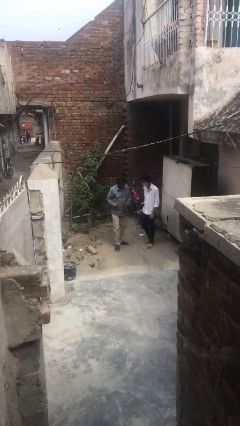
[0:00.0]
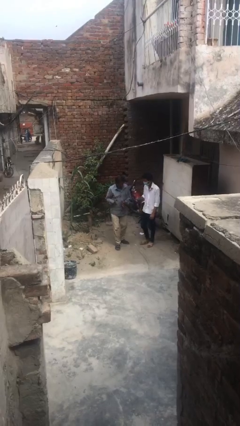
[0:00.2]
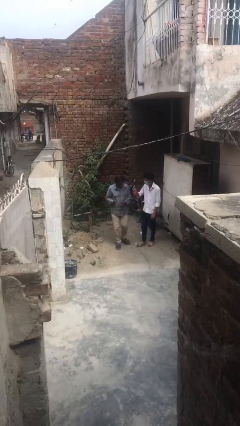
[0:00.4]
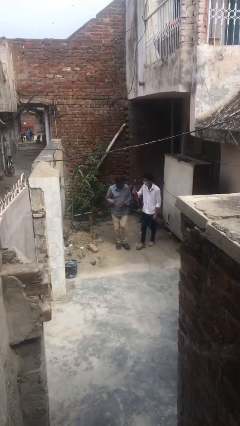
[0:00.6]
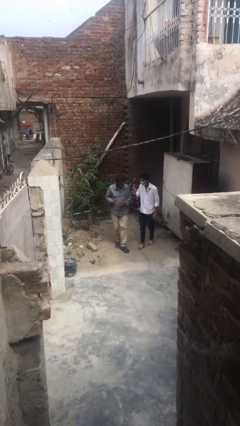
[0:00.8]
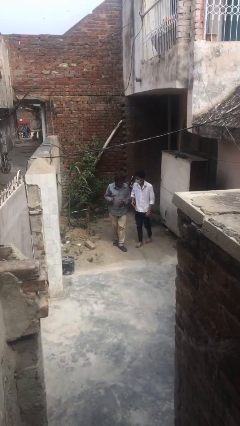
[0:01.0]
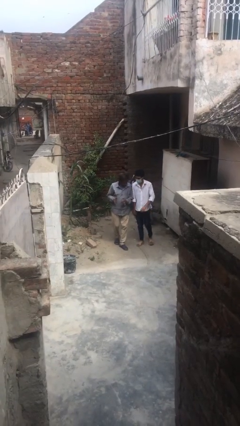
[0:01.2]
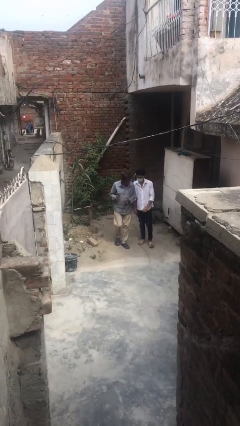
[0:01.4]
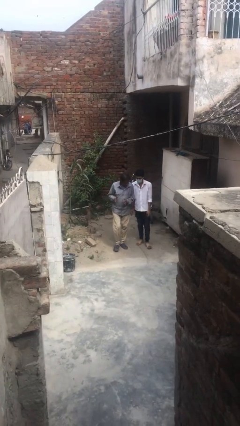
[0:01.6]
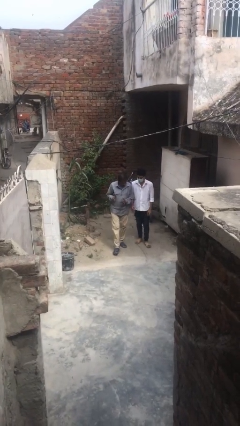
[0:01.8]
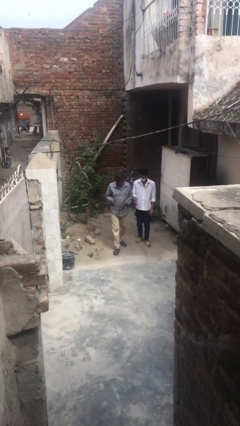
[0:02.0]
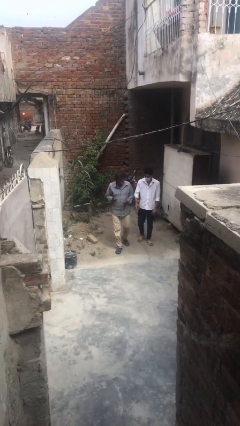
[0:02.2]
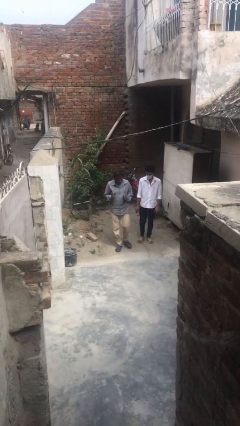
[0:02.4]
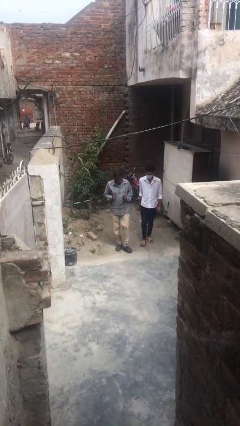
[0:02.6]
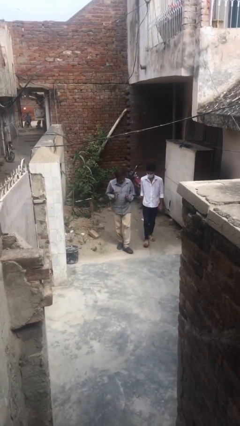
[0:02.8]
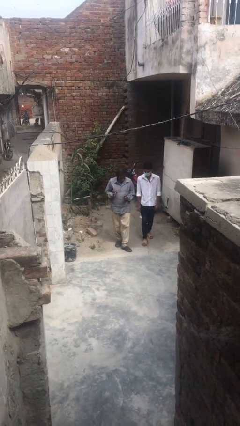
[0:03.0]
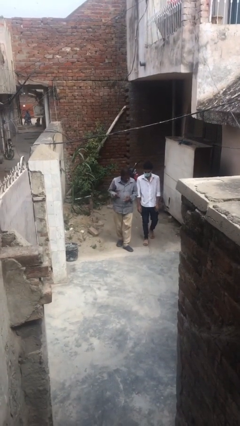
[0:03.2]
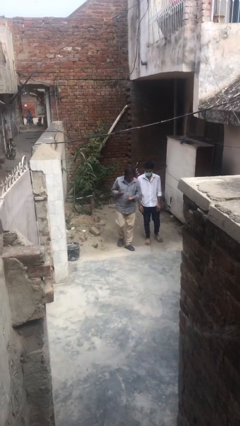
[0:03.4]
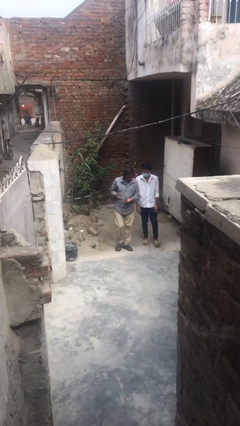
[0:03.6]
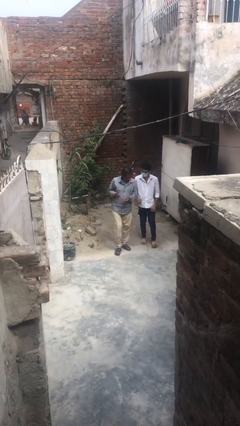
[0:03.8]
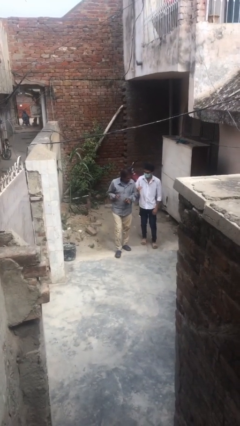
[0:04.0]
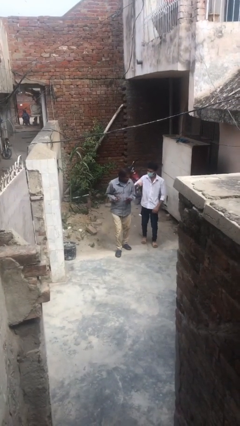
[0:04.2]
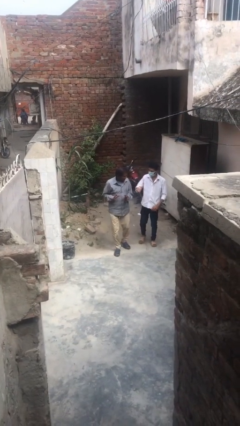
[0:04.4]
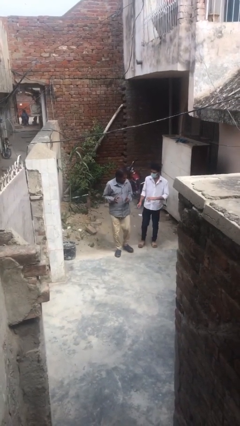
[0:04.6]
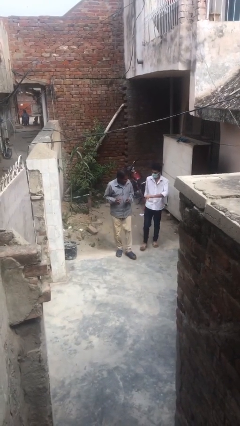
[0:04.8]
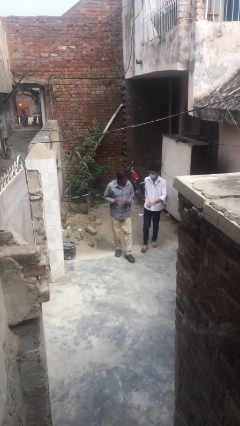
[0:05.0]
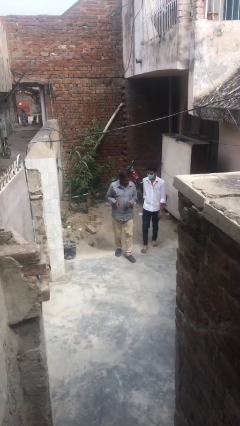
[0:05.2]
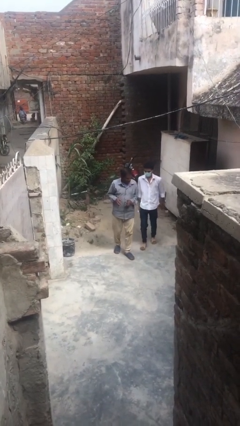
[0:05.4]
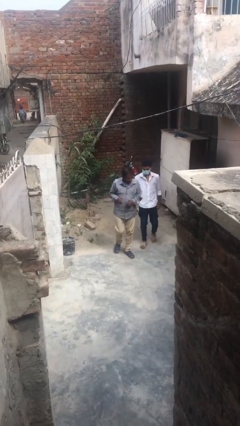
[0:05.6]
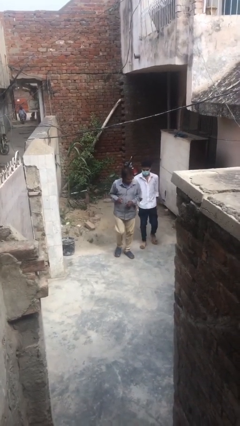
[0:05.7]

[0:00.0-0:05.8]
person talks to person

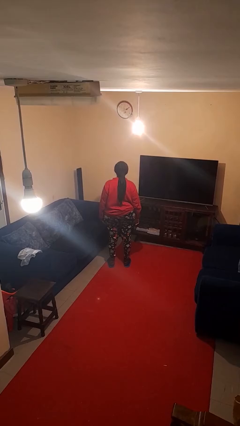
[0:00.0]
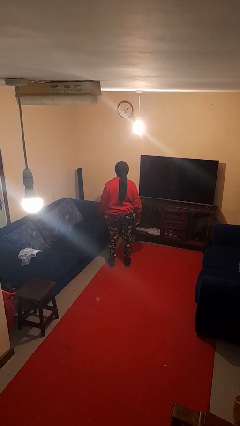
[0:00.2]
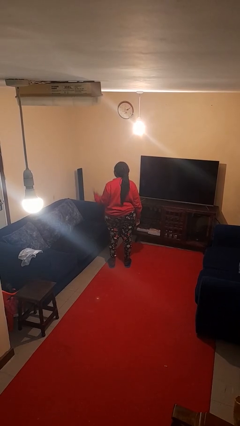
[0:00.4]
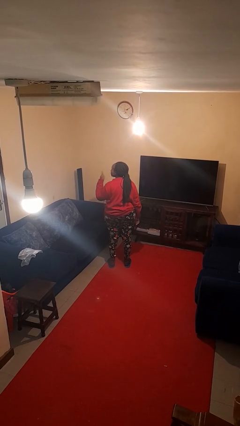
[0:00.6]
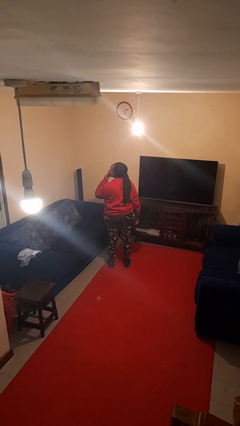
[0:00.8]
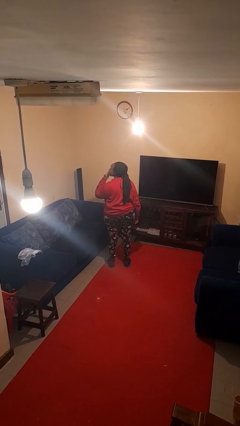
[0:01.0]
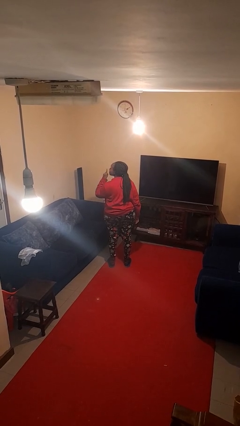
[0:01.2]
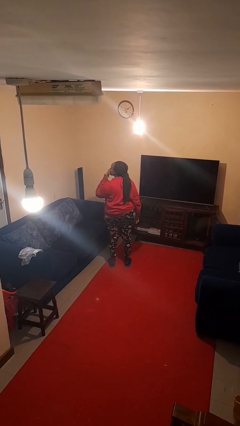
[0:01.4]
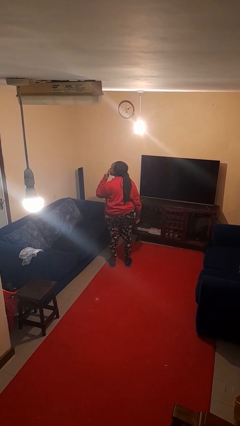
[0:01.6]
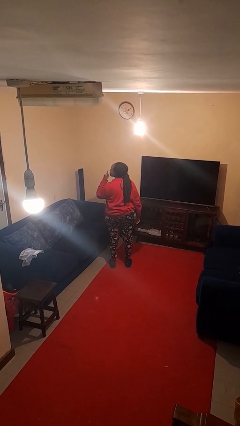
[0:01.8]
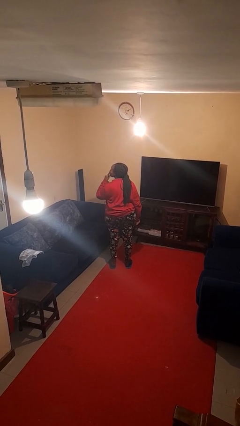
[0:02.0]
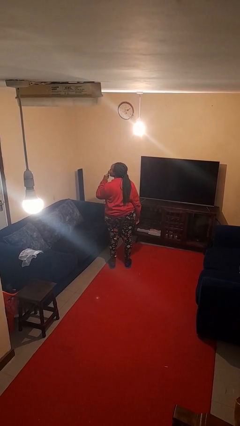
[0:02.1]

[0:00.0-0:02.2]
person gestures be quiet

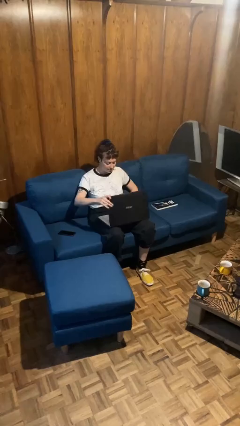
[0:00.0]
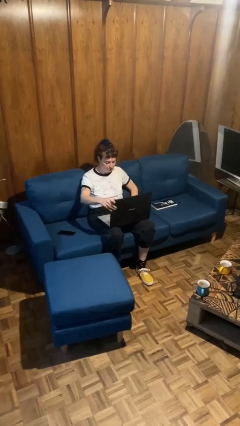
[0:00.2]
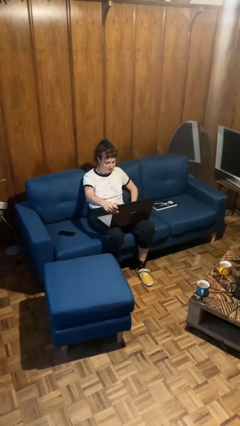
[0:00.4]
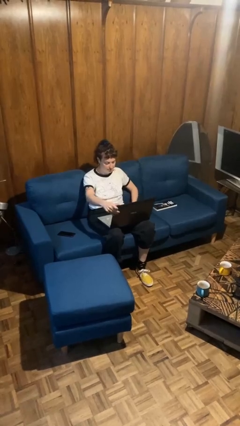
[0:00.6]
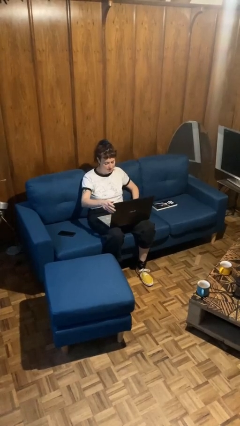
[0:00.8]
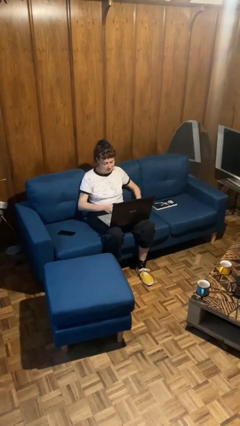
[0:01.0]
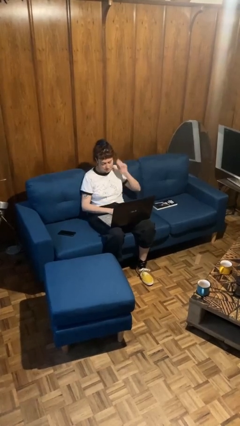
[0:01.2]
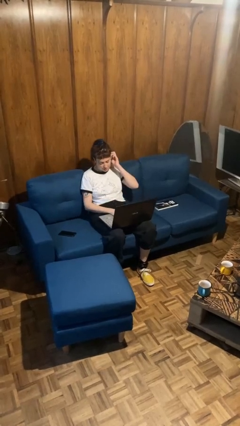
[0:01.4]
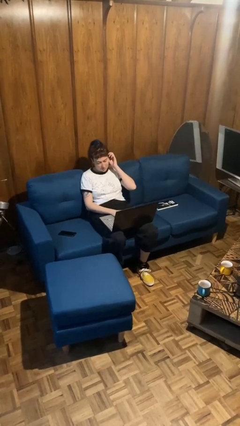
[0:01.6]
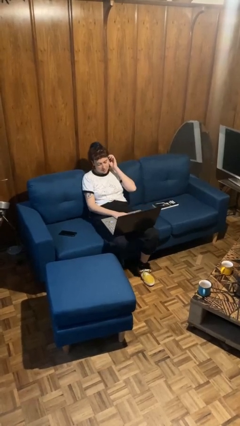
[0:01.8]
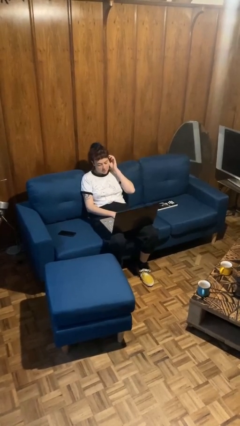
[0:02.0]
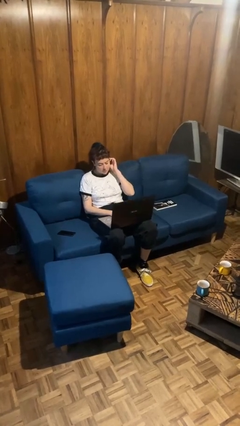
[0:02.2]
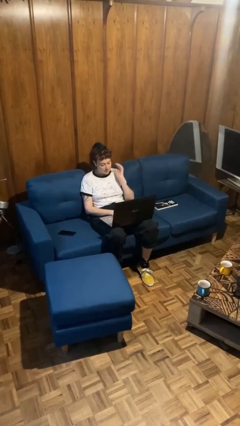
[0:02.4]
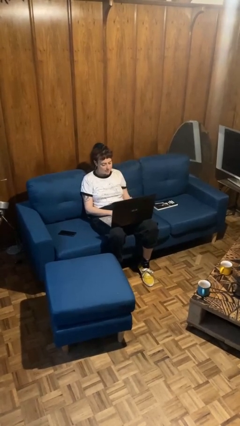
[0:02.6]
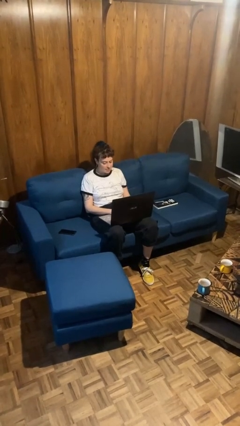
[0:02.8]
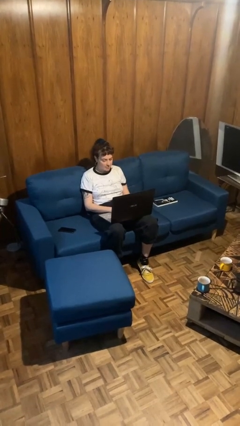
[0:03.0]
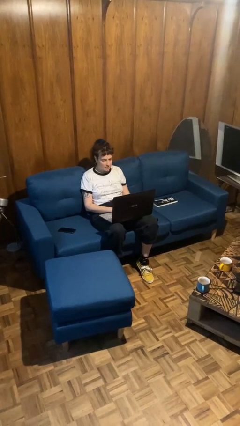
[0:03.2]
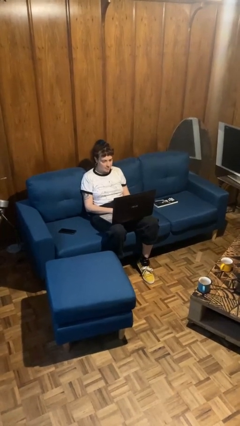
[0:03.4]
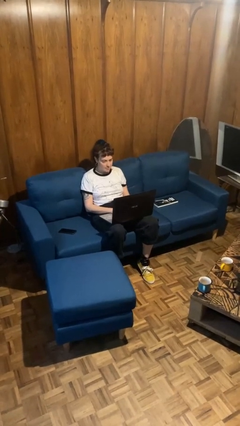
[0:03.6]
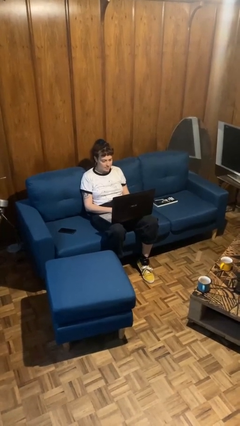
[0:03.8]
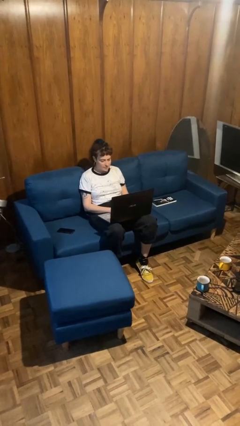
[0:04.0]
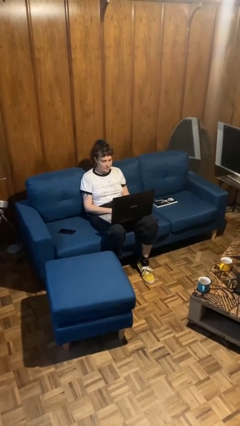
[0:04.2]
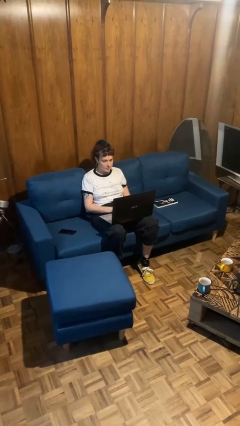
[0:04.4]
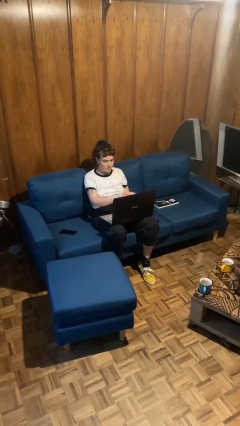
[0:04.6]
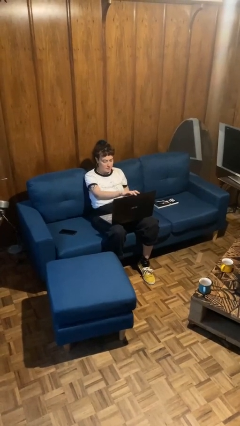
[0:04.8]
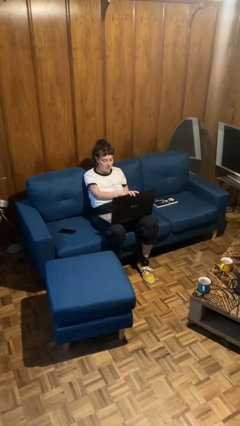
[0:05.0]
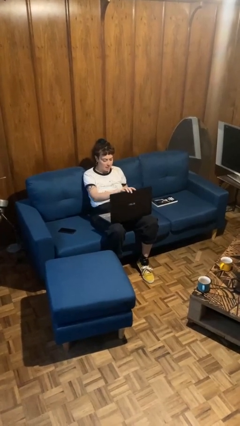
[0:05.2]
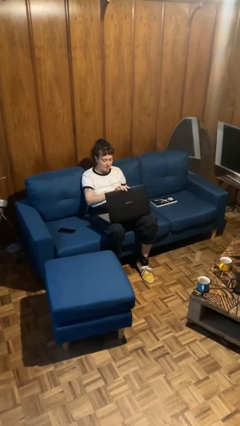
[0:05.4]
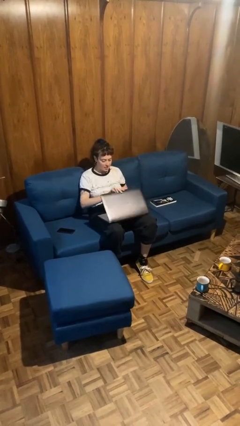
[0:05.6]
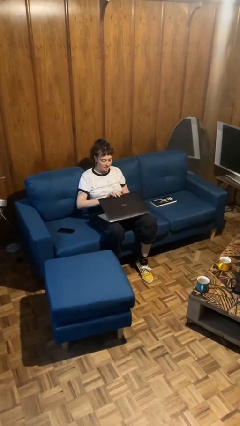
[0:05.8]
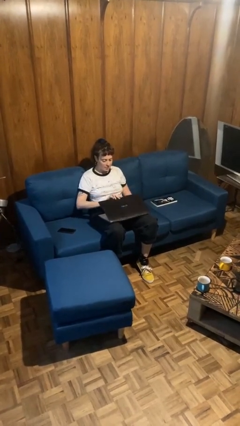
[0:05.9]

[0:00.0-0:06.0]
person interacts with laptop

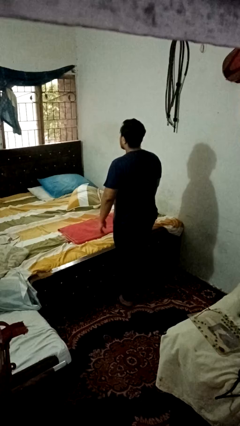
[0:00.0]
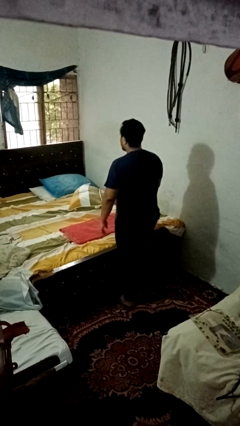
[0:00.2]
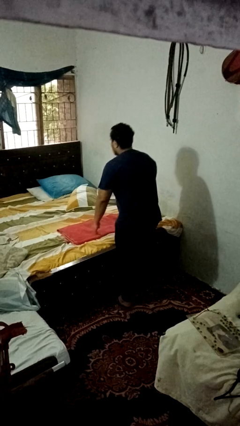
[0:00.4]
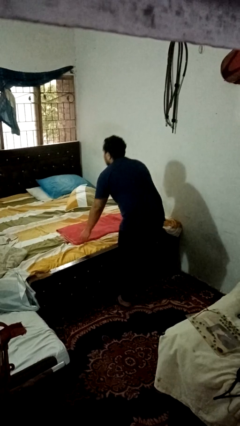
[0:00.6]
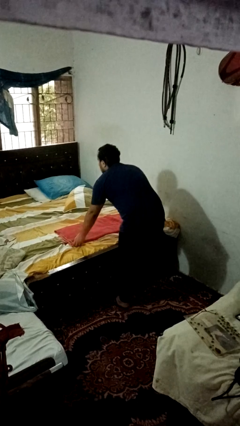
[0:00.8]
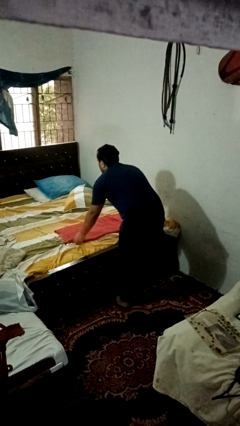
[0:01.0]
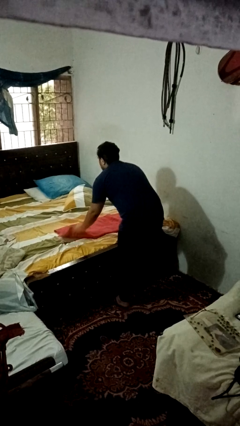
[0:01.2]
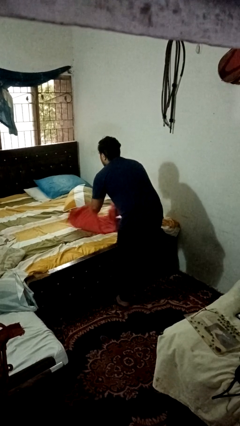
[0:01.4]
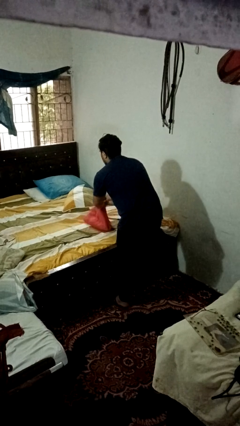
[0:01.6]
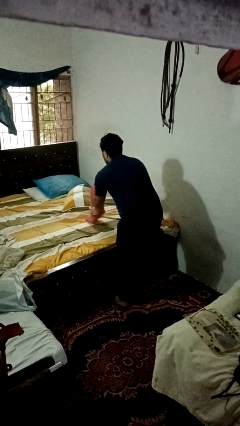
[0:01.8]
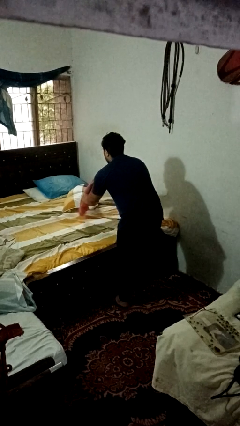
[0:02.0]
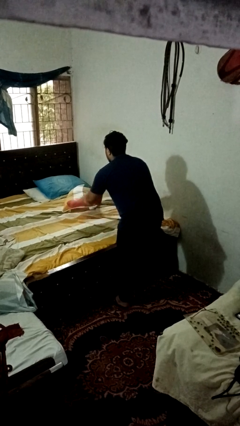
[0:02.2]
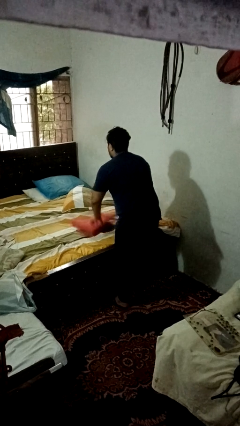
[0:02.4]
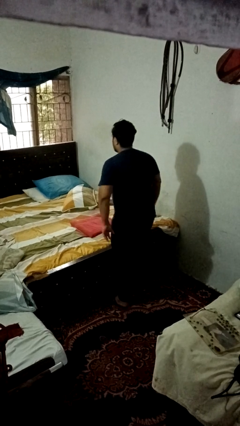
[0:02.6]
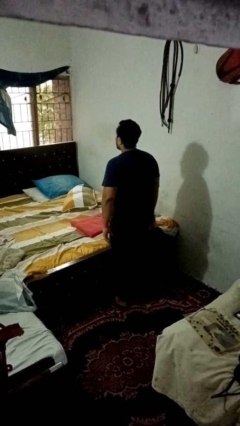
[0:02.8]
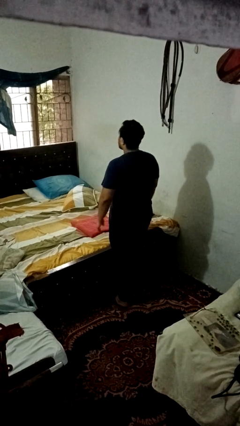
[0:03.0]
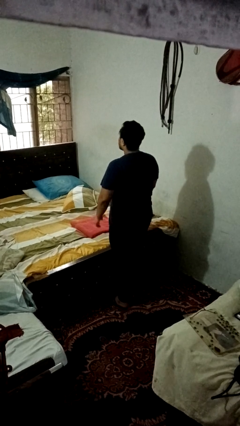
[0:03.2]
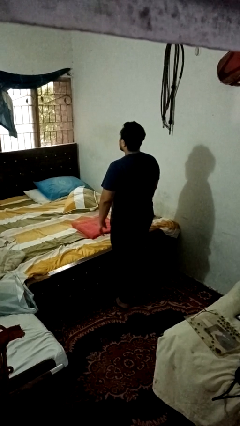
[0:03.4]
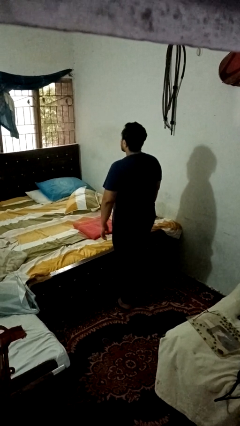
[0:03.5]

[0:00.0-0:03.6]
person folds towel

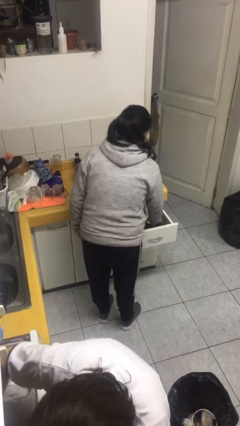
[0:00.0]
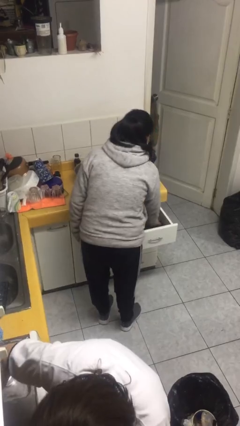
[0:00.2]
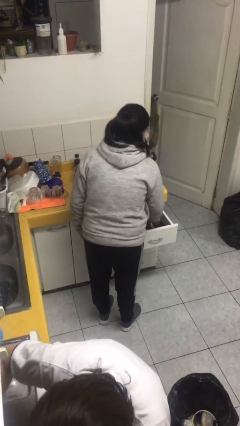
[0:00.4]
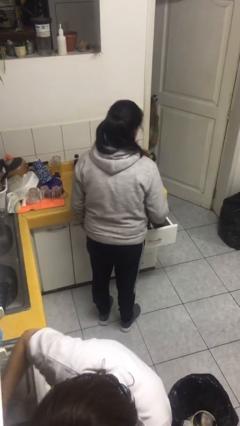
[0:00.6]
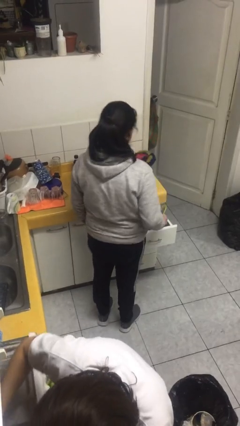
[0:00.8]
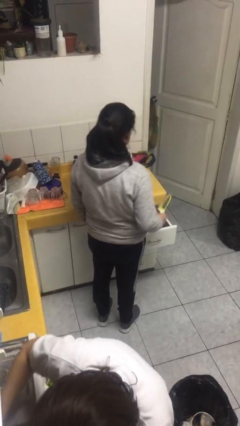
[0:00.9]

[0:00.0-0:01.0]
person takes object from kitchen drawer
